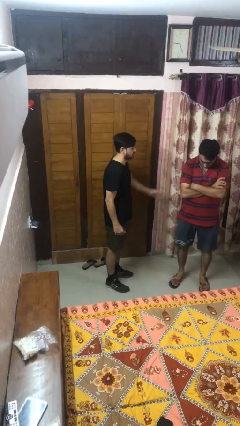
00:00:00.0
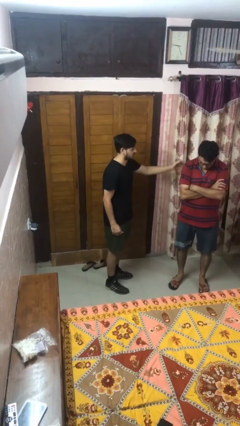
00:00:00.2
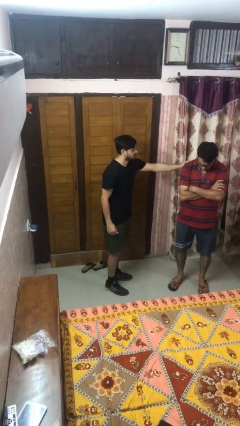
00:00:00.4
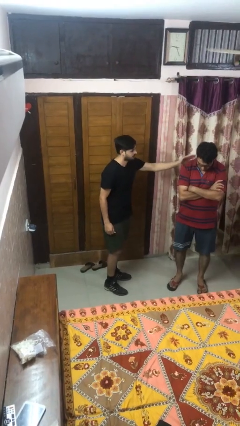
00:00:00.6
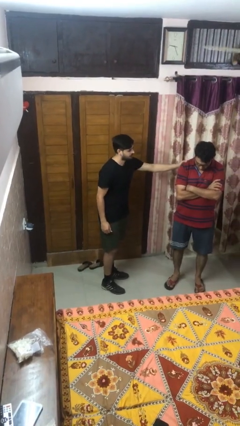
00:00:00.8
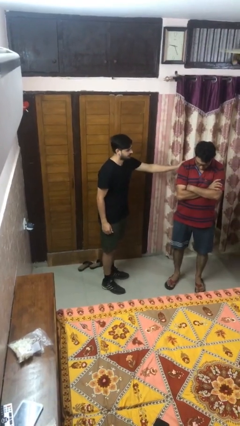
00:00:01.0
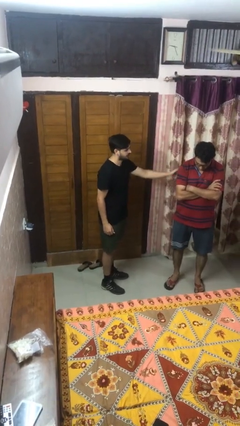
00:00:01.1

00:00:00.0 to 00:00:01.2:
person pounds shoulders of person

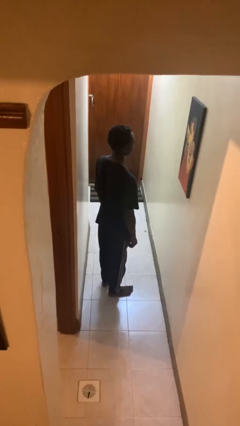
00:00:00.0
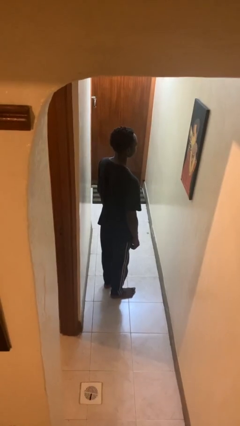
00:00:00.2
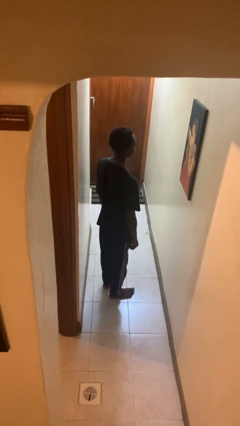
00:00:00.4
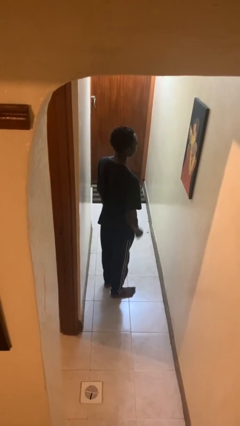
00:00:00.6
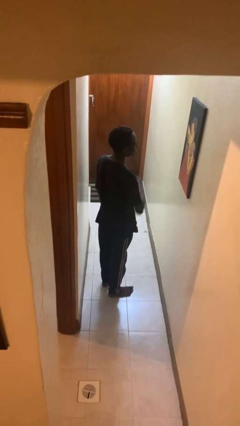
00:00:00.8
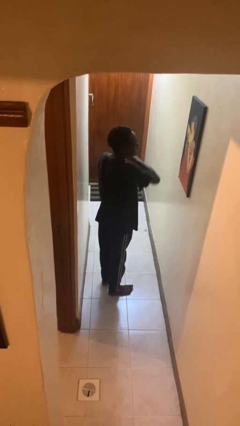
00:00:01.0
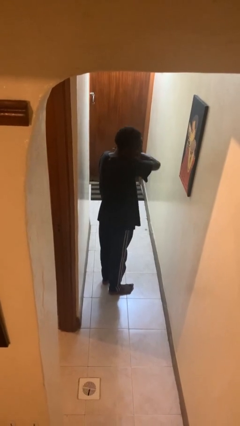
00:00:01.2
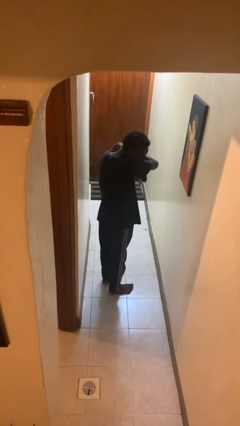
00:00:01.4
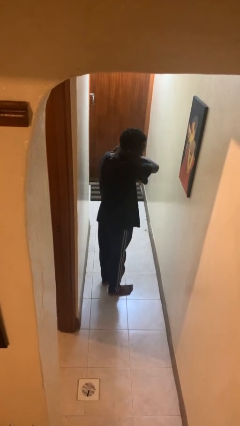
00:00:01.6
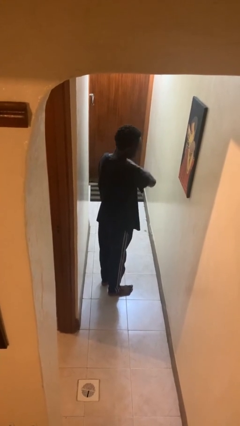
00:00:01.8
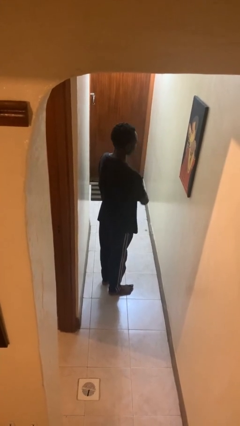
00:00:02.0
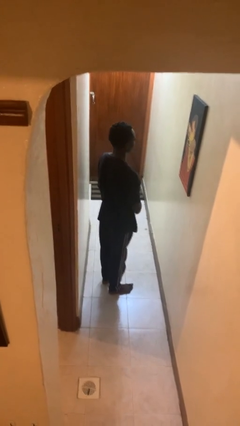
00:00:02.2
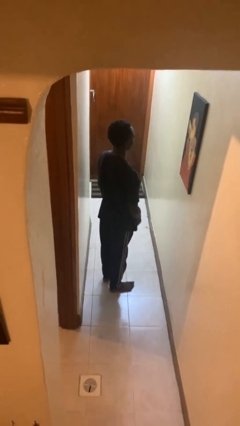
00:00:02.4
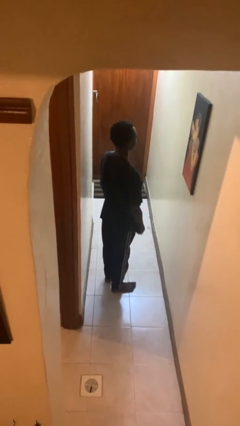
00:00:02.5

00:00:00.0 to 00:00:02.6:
person sneezes into arm

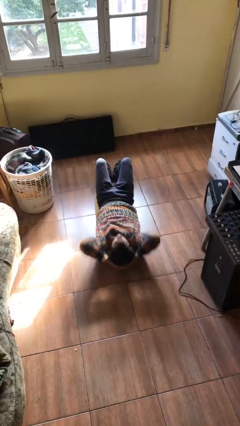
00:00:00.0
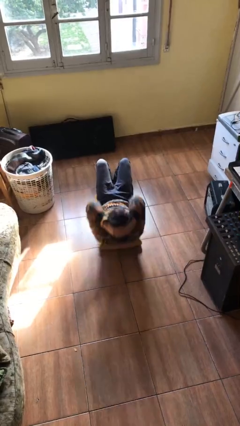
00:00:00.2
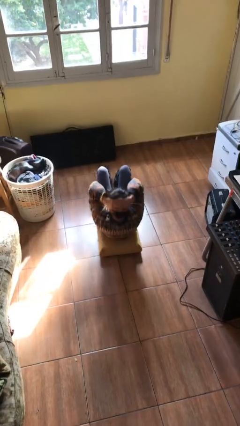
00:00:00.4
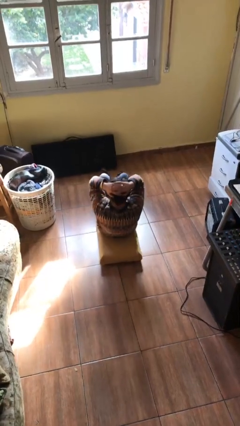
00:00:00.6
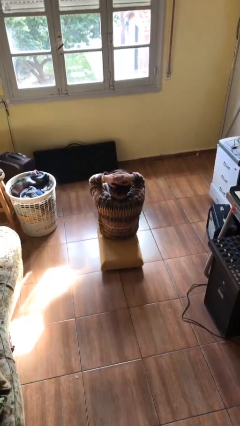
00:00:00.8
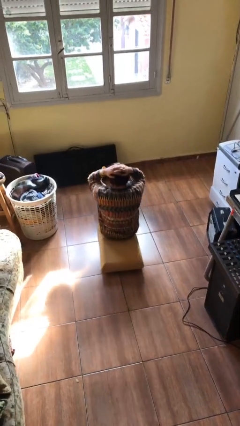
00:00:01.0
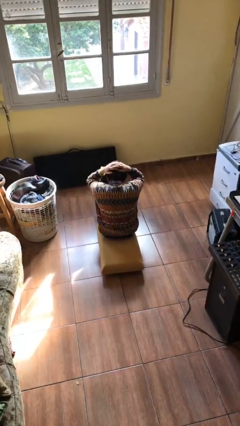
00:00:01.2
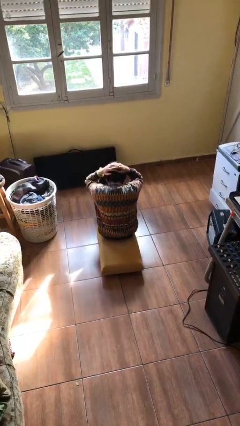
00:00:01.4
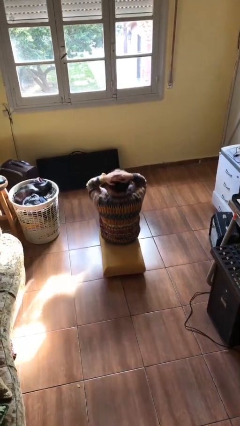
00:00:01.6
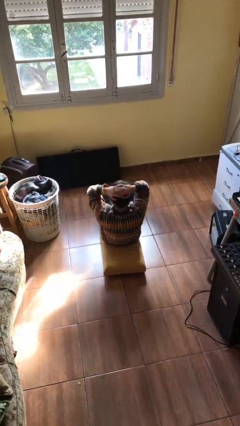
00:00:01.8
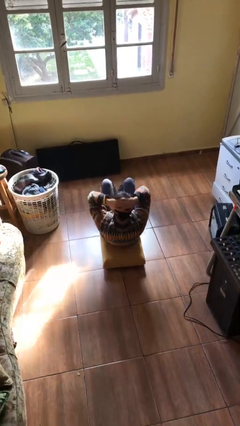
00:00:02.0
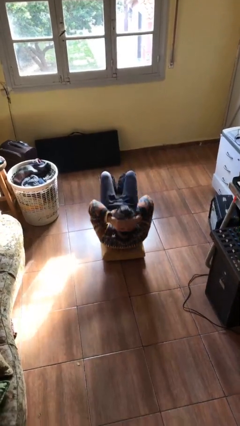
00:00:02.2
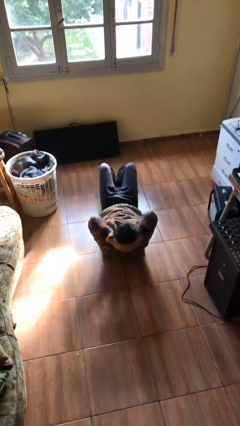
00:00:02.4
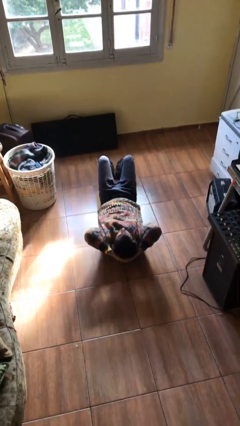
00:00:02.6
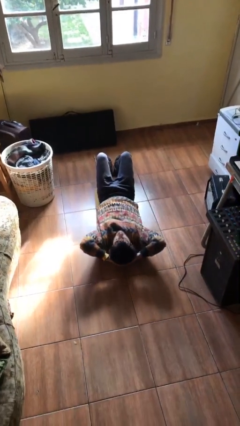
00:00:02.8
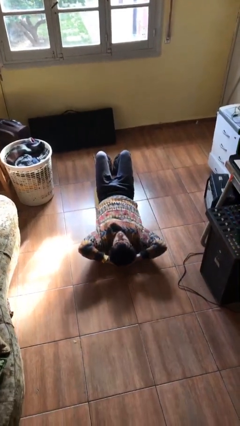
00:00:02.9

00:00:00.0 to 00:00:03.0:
person exercises with situp

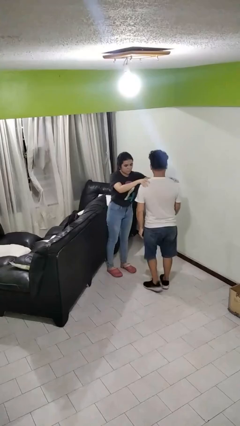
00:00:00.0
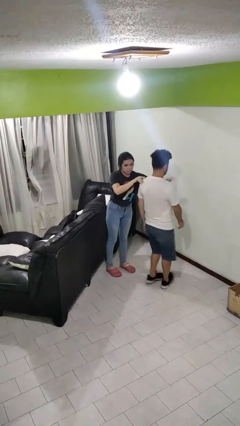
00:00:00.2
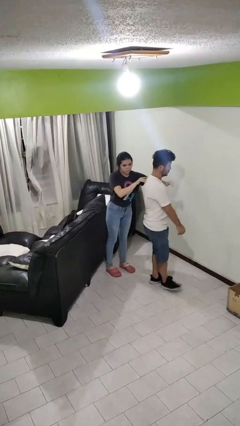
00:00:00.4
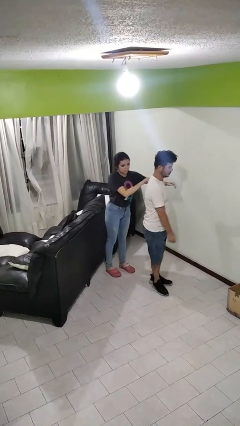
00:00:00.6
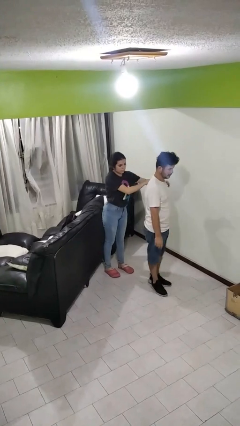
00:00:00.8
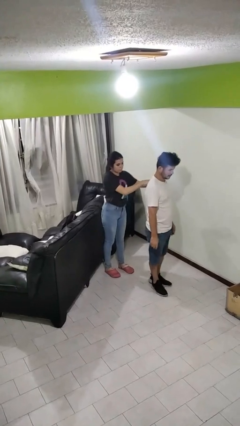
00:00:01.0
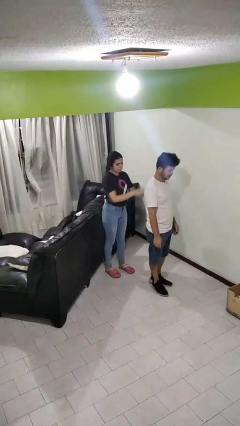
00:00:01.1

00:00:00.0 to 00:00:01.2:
person spins person around

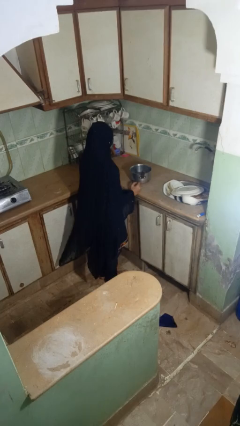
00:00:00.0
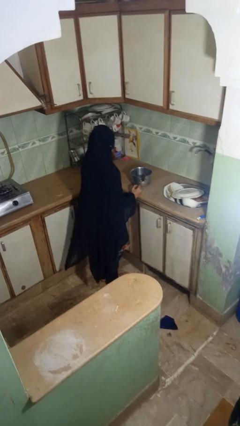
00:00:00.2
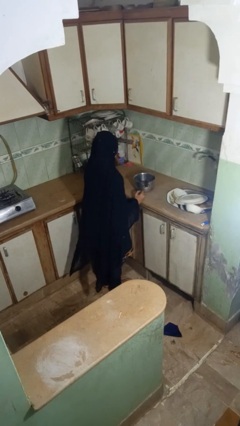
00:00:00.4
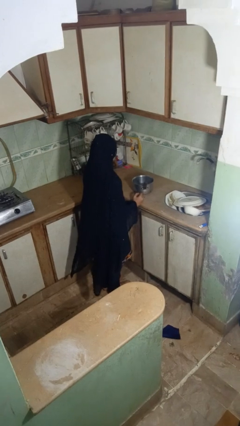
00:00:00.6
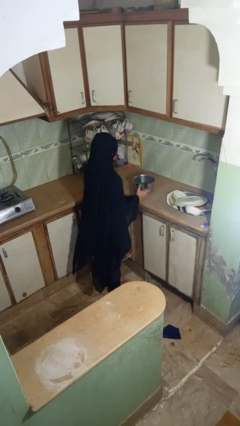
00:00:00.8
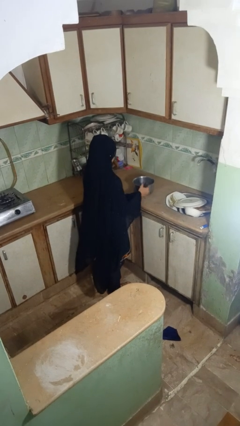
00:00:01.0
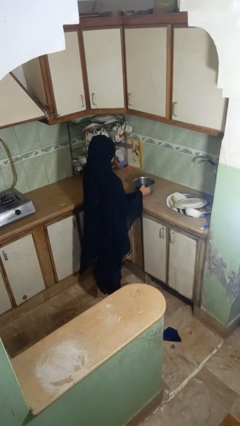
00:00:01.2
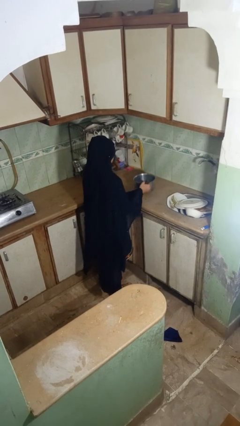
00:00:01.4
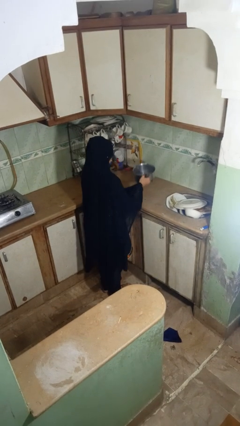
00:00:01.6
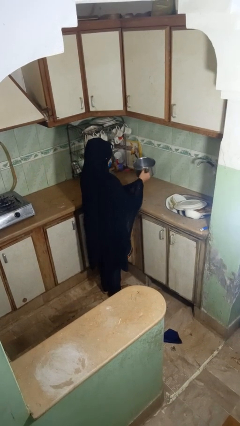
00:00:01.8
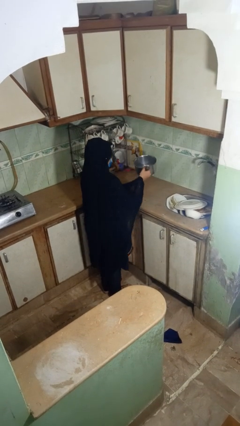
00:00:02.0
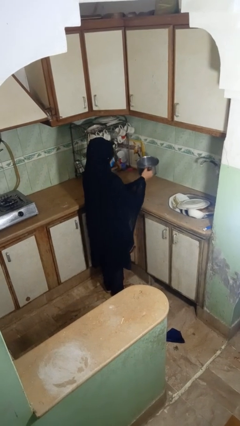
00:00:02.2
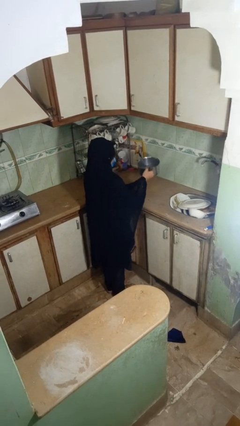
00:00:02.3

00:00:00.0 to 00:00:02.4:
person picks up object from countertop

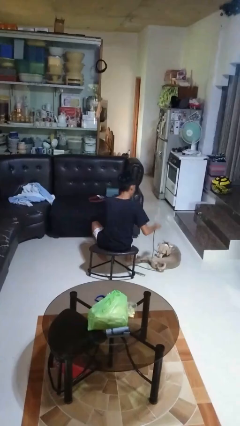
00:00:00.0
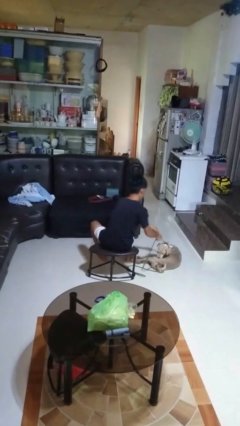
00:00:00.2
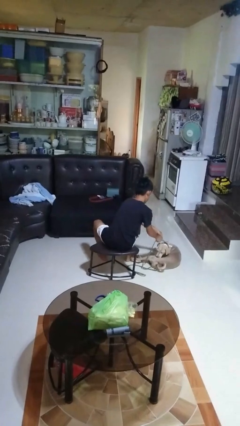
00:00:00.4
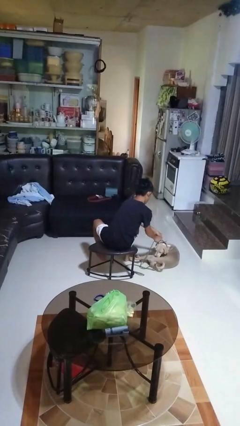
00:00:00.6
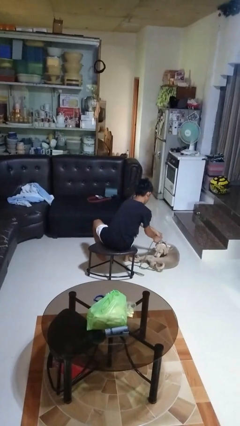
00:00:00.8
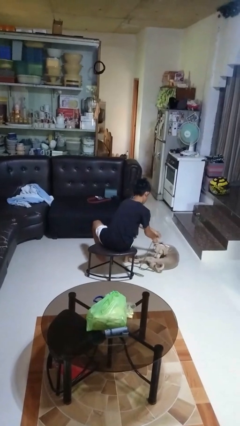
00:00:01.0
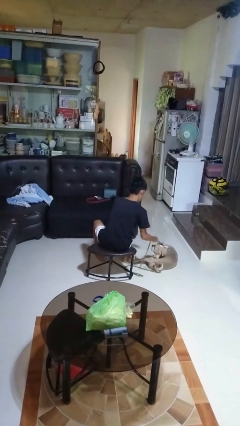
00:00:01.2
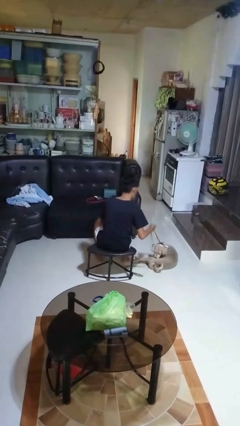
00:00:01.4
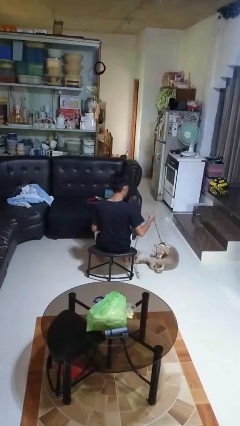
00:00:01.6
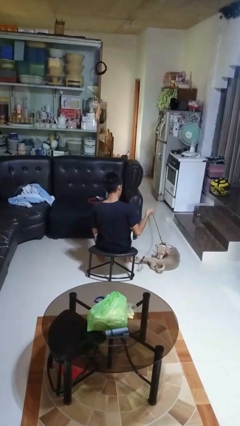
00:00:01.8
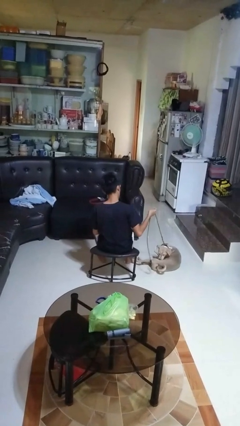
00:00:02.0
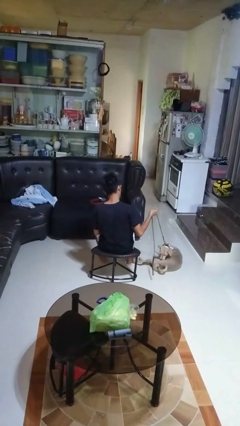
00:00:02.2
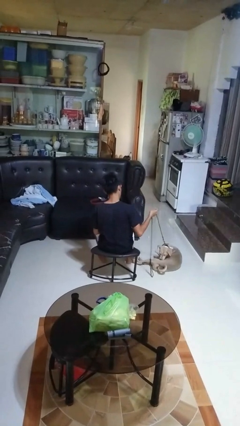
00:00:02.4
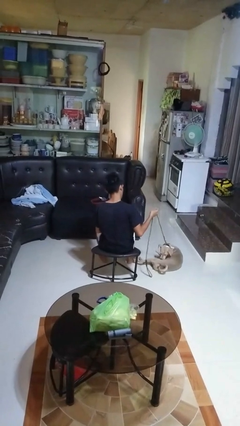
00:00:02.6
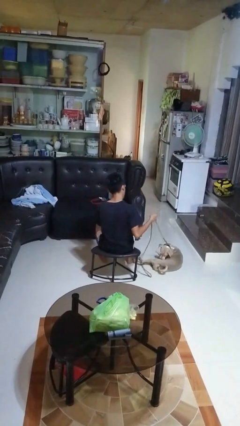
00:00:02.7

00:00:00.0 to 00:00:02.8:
person attaches leash to dog

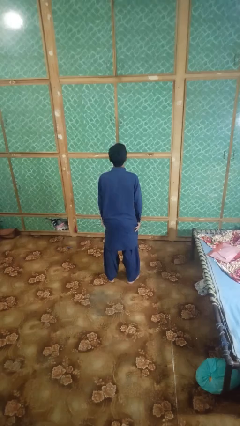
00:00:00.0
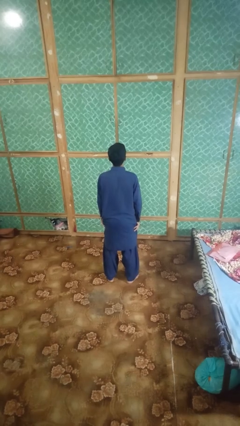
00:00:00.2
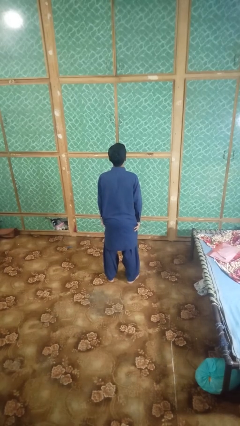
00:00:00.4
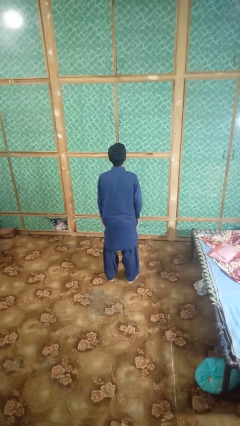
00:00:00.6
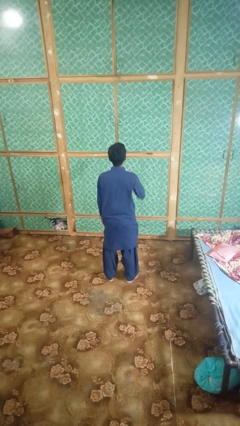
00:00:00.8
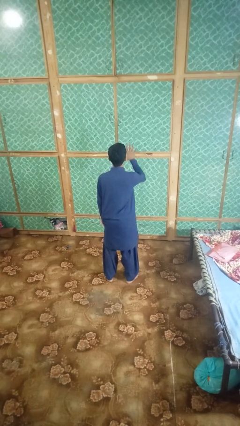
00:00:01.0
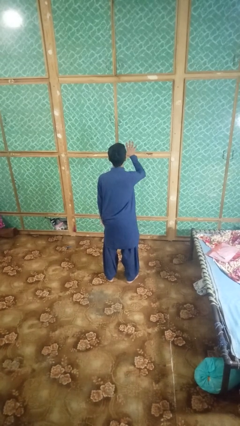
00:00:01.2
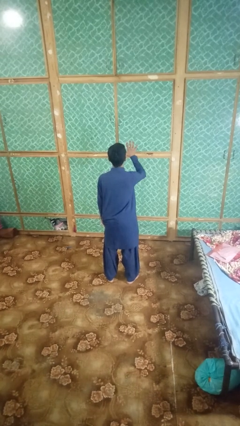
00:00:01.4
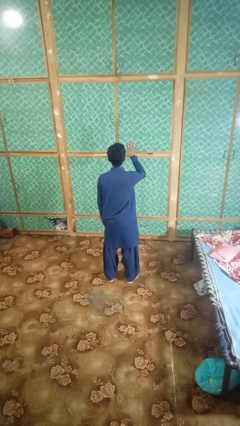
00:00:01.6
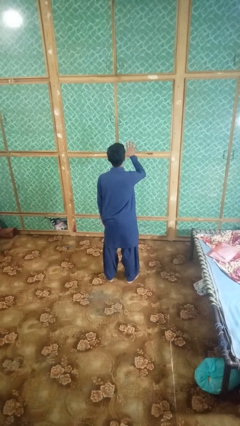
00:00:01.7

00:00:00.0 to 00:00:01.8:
person gestures number five

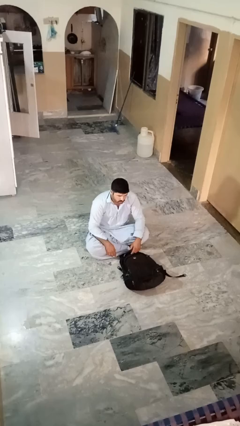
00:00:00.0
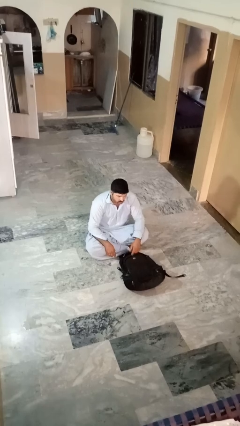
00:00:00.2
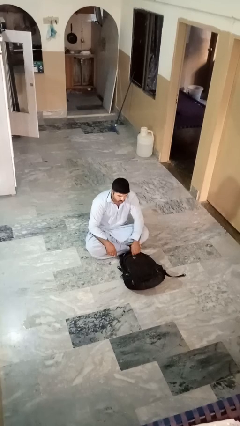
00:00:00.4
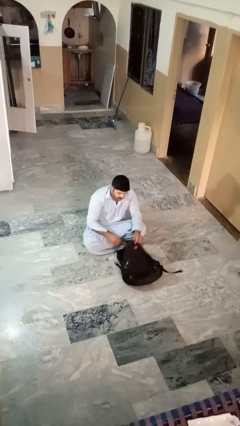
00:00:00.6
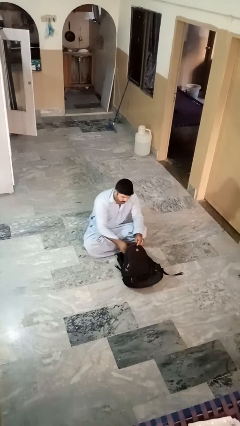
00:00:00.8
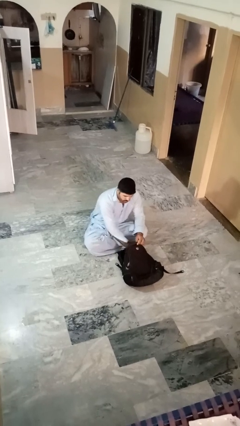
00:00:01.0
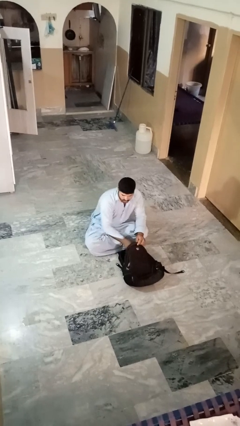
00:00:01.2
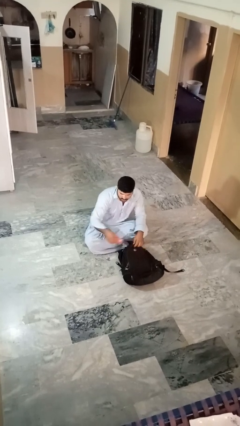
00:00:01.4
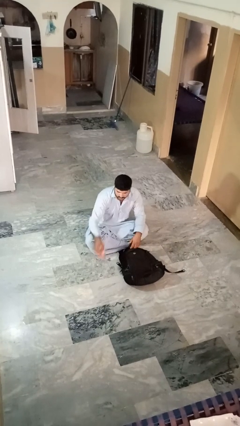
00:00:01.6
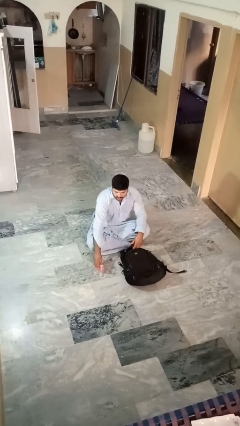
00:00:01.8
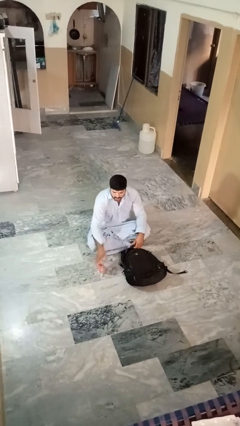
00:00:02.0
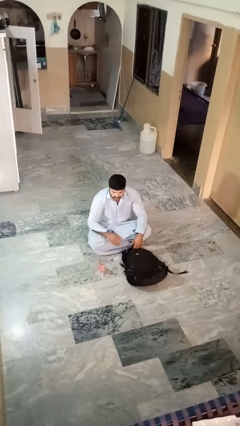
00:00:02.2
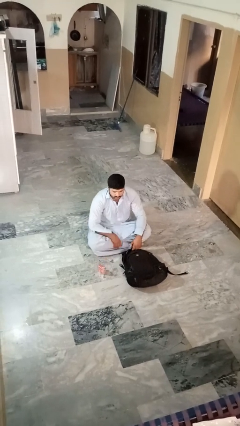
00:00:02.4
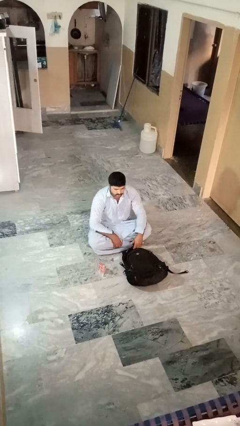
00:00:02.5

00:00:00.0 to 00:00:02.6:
person takes object from bag
